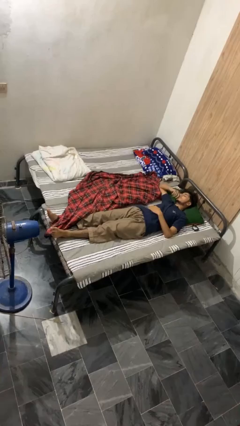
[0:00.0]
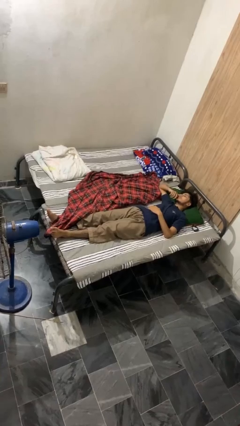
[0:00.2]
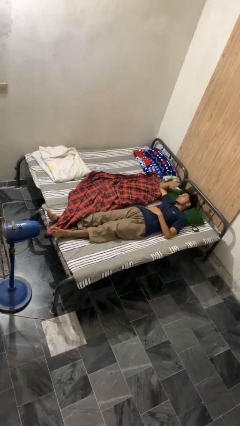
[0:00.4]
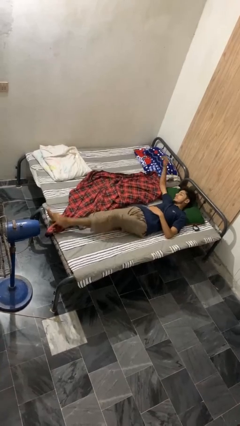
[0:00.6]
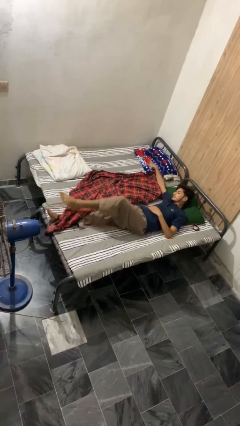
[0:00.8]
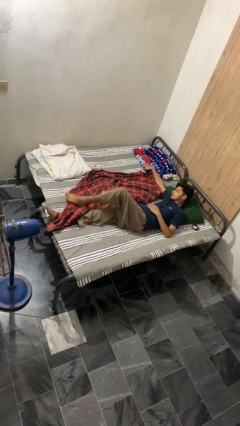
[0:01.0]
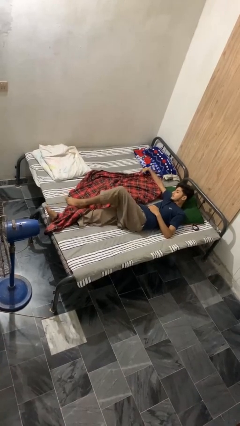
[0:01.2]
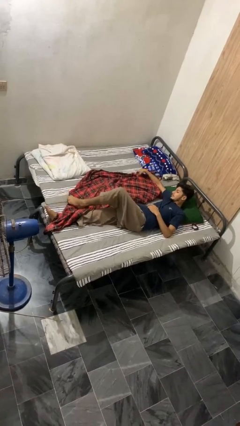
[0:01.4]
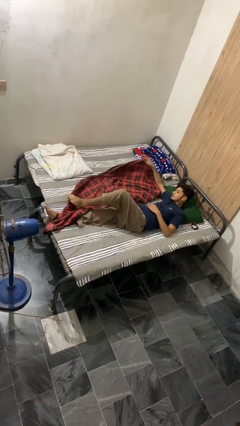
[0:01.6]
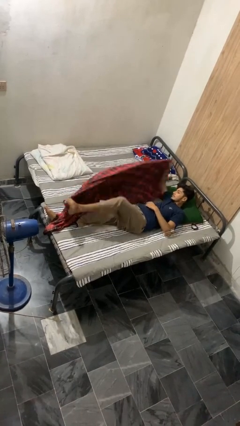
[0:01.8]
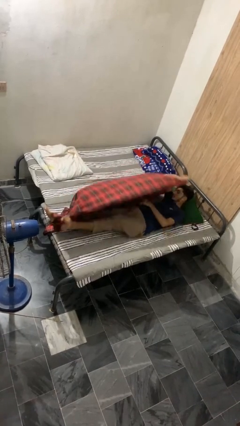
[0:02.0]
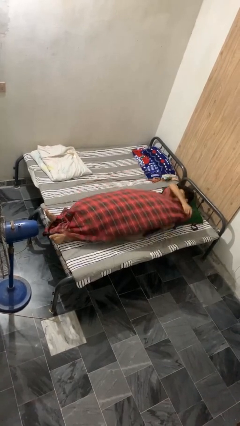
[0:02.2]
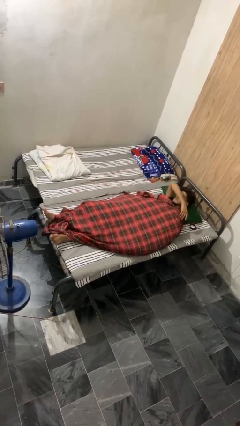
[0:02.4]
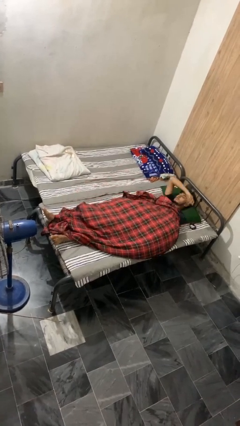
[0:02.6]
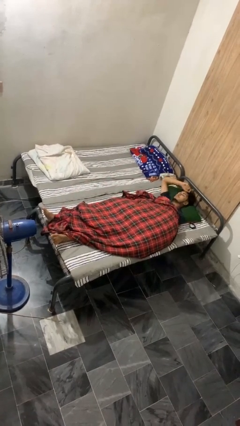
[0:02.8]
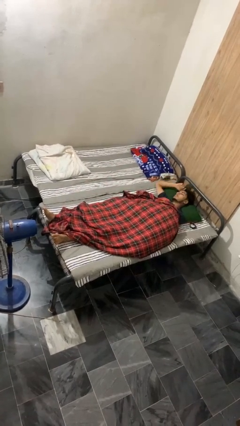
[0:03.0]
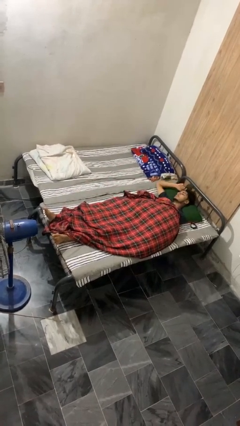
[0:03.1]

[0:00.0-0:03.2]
person covers with bedsheets

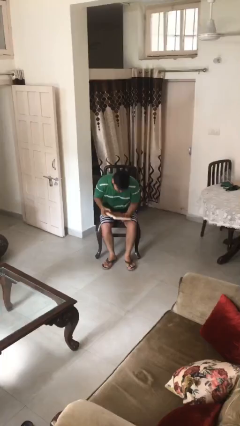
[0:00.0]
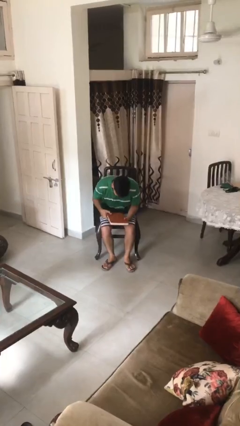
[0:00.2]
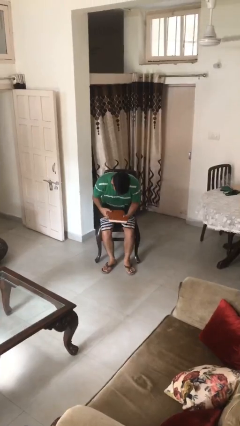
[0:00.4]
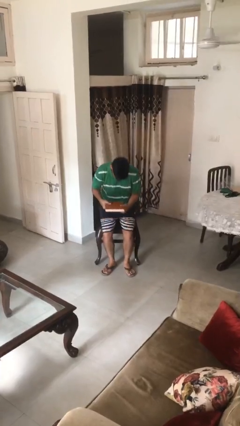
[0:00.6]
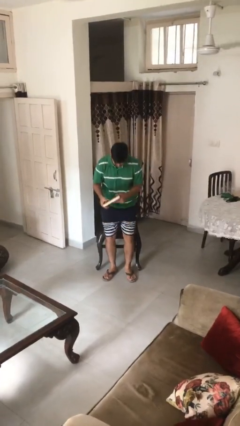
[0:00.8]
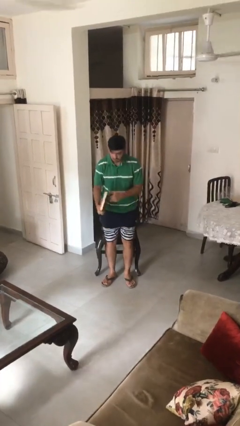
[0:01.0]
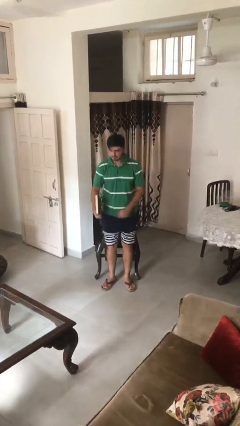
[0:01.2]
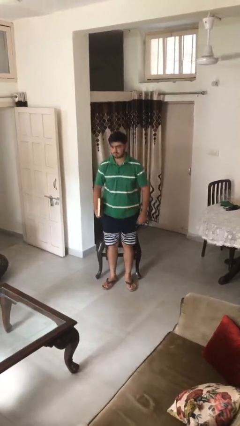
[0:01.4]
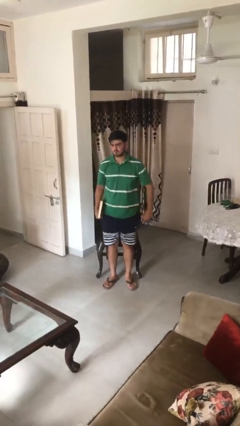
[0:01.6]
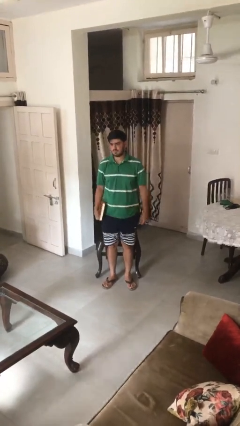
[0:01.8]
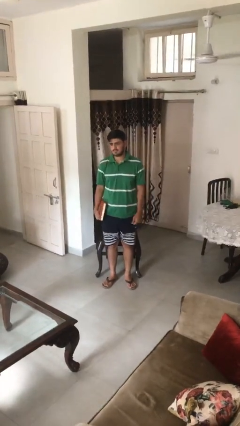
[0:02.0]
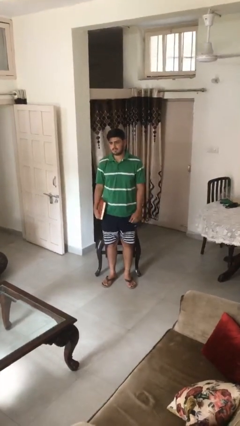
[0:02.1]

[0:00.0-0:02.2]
person stands up

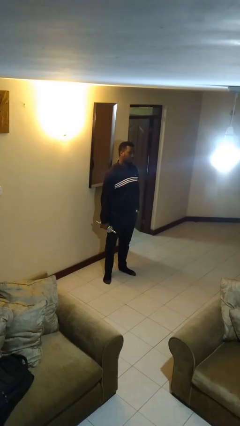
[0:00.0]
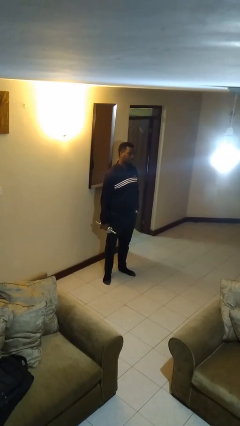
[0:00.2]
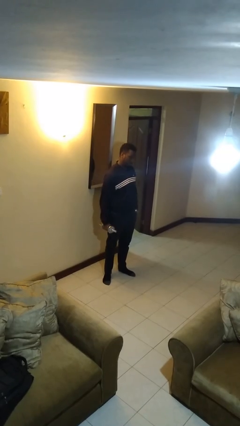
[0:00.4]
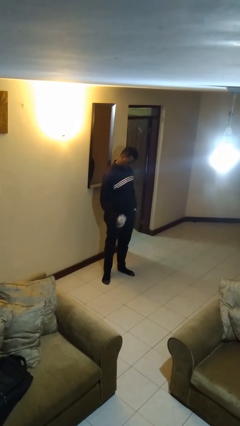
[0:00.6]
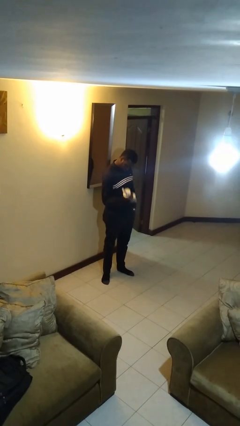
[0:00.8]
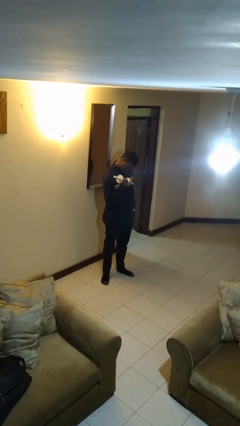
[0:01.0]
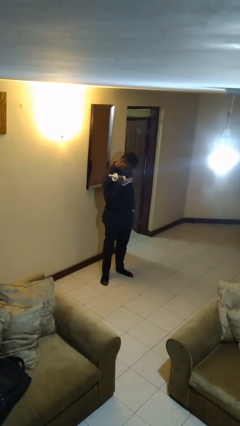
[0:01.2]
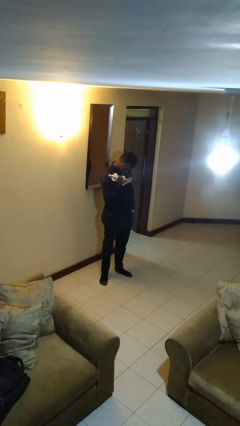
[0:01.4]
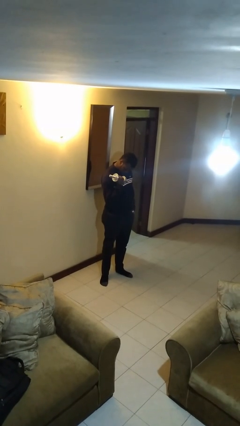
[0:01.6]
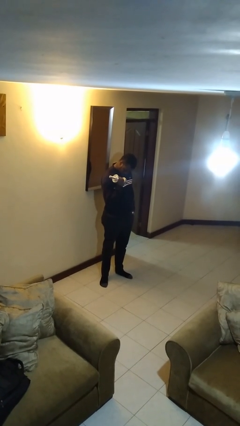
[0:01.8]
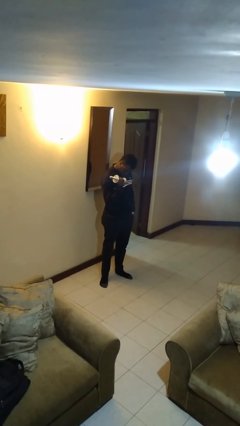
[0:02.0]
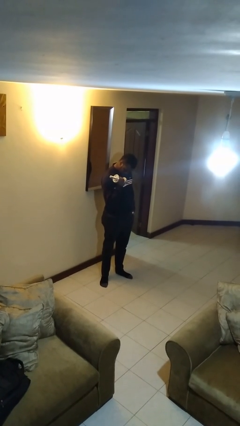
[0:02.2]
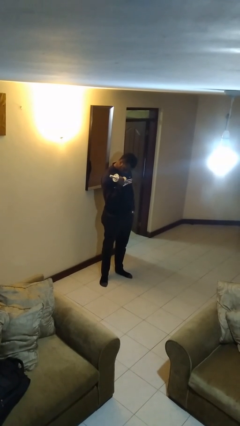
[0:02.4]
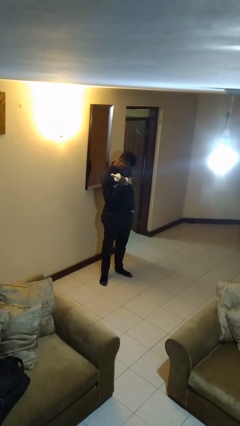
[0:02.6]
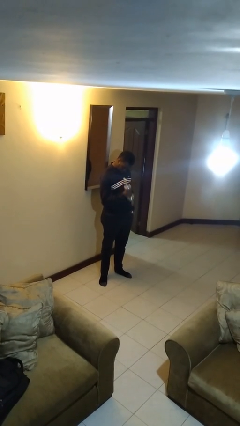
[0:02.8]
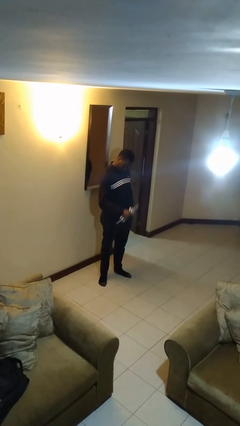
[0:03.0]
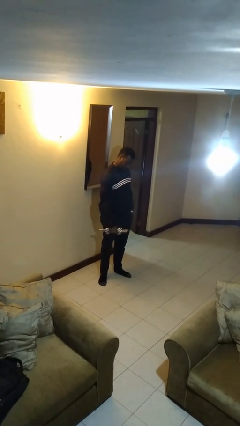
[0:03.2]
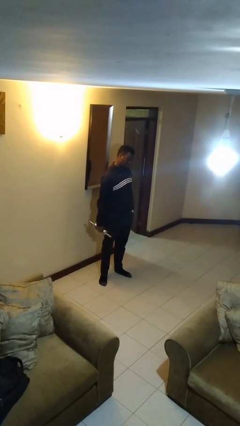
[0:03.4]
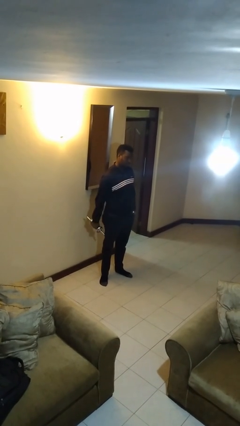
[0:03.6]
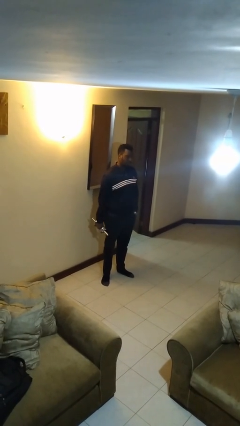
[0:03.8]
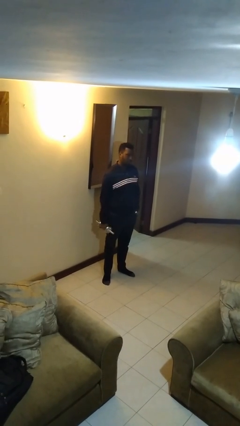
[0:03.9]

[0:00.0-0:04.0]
person lifts dumbbells

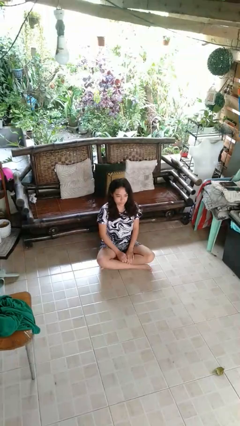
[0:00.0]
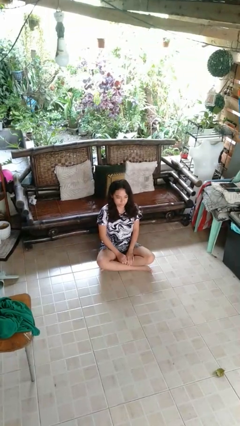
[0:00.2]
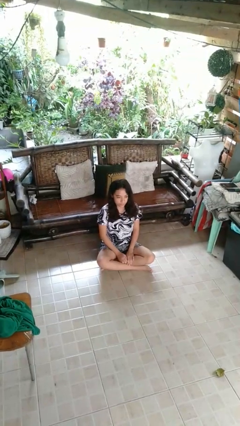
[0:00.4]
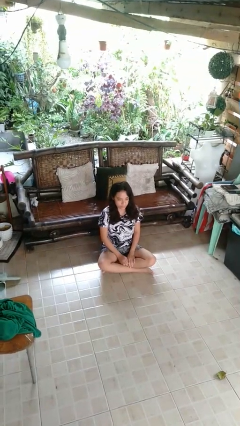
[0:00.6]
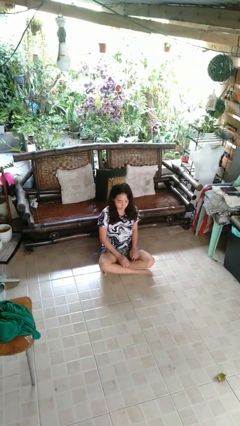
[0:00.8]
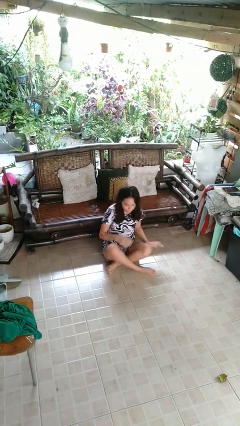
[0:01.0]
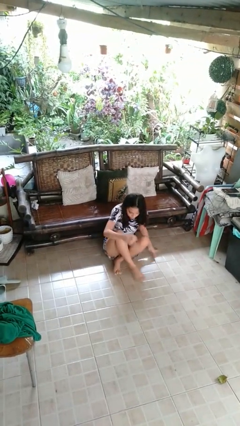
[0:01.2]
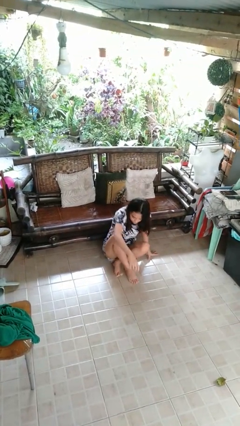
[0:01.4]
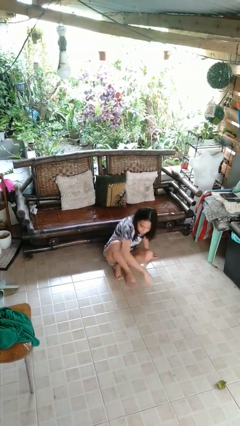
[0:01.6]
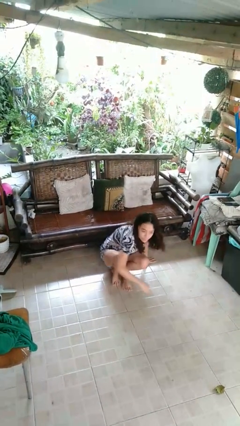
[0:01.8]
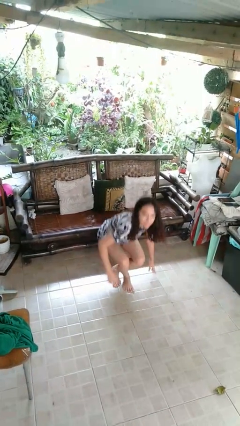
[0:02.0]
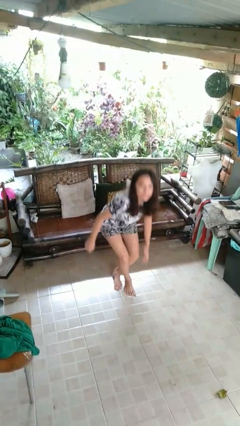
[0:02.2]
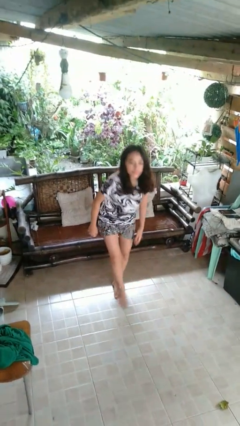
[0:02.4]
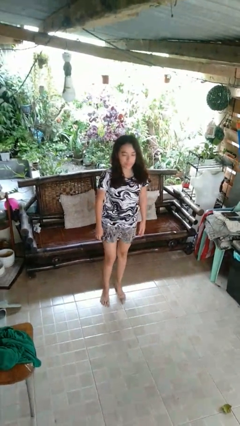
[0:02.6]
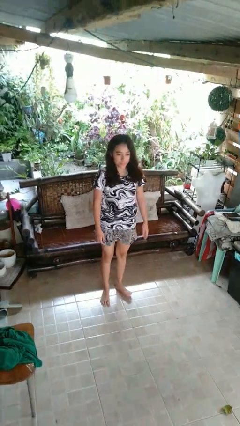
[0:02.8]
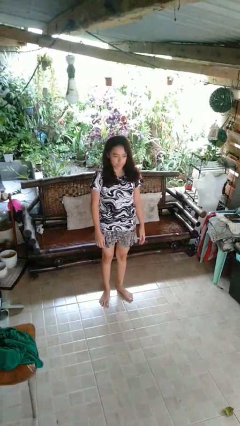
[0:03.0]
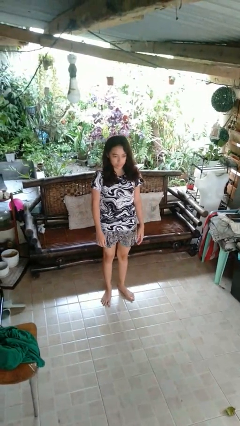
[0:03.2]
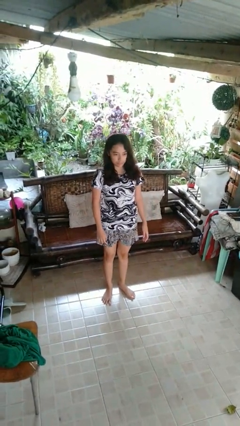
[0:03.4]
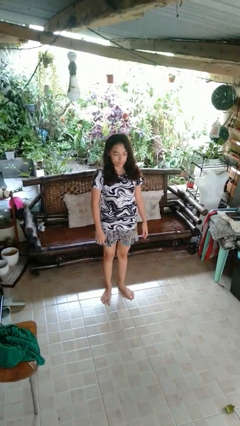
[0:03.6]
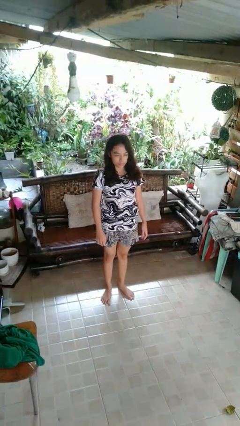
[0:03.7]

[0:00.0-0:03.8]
person stands up from floor

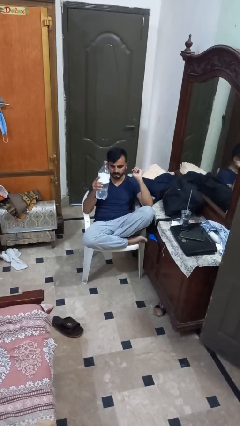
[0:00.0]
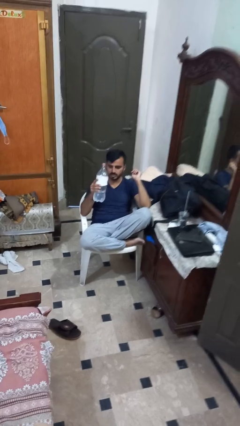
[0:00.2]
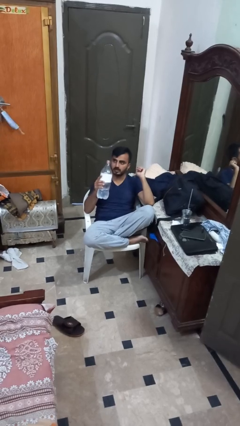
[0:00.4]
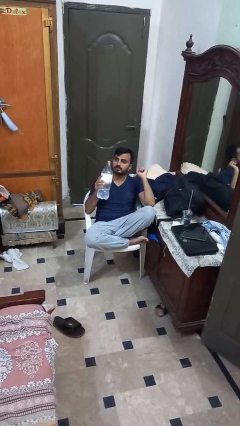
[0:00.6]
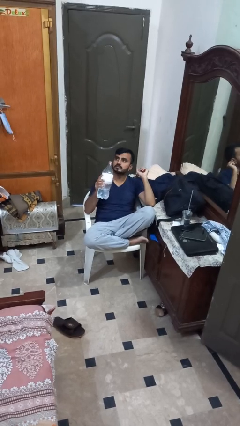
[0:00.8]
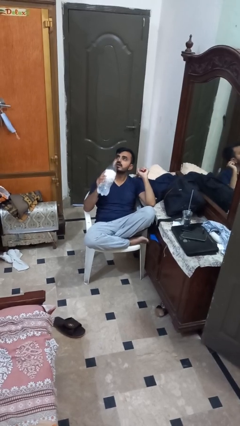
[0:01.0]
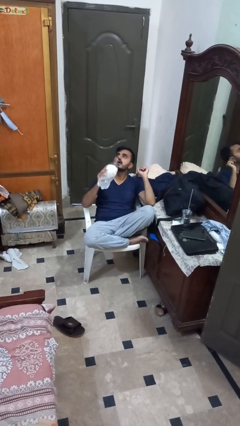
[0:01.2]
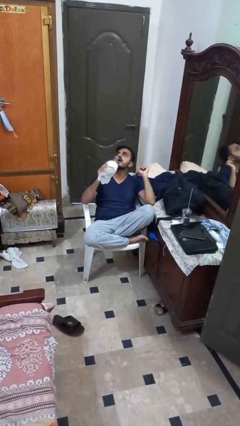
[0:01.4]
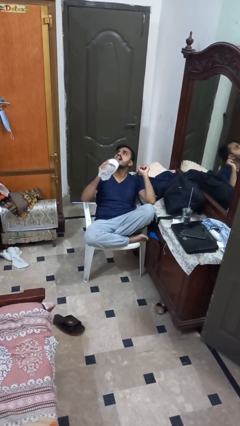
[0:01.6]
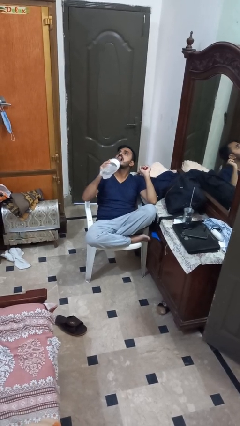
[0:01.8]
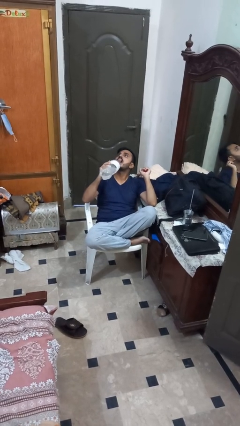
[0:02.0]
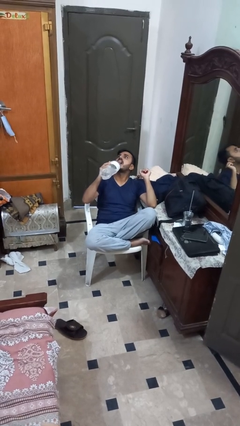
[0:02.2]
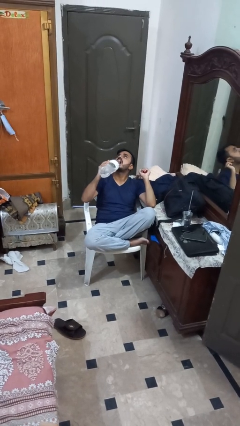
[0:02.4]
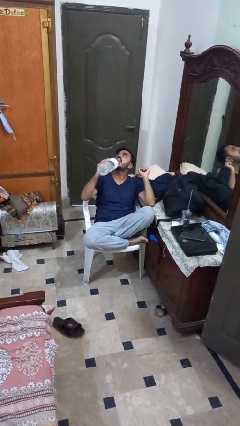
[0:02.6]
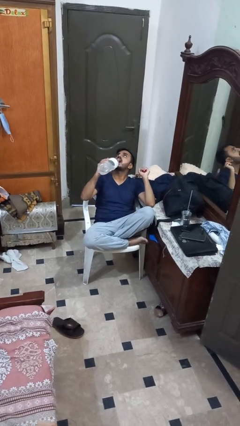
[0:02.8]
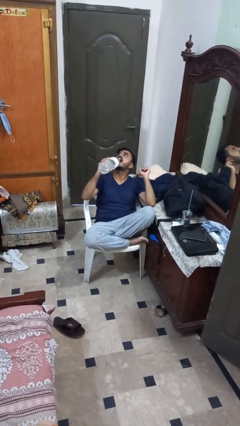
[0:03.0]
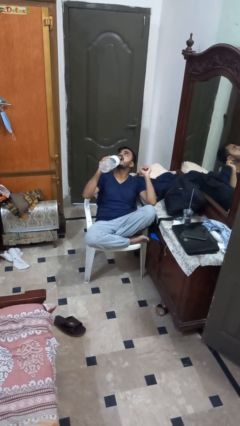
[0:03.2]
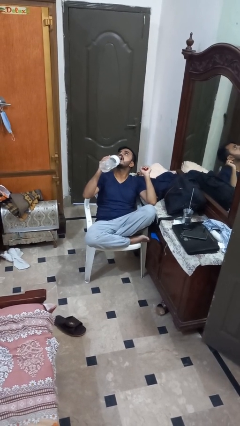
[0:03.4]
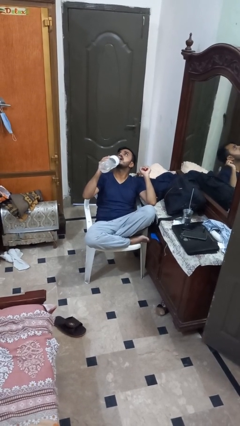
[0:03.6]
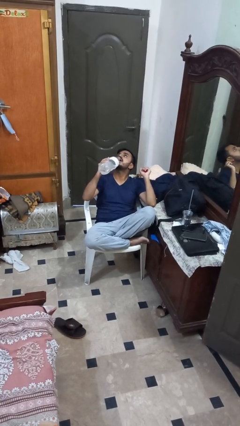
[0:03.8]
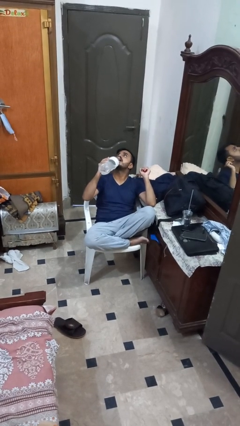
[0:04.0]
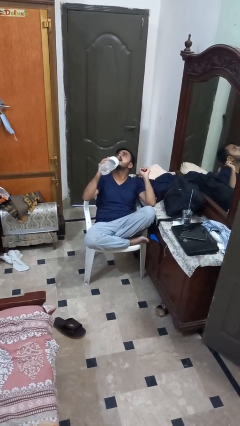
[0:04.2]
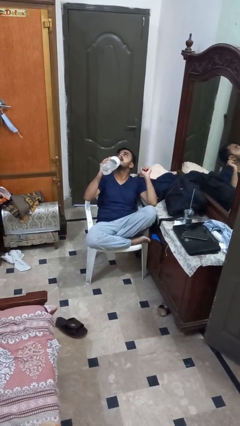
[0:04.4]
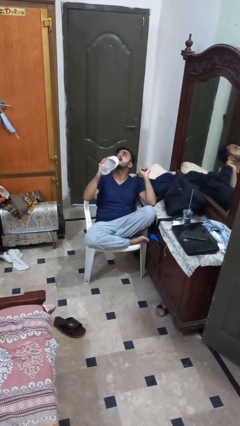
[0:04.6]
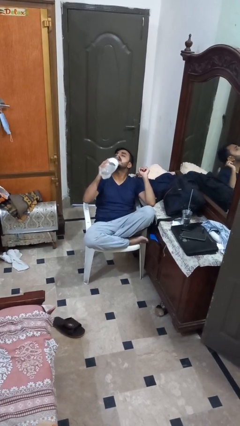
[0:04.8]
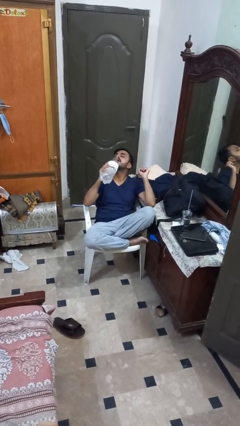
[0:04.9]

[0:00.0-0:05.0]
person drinks from bottle
